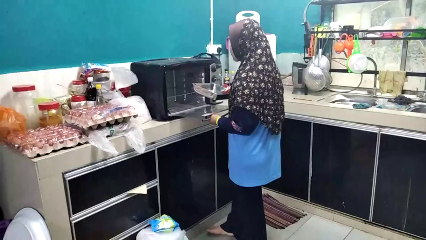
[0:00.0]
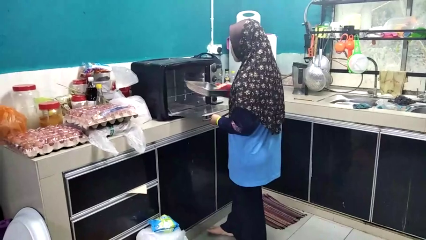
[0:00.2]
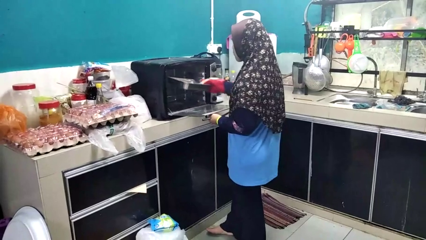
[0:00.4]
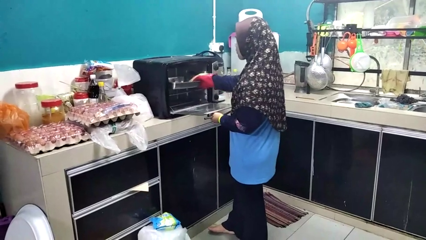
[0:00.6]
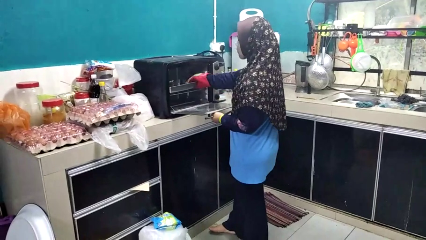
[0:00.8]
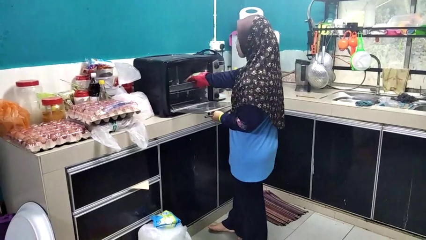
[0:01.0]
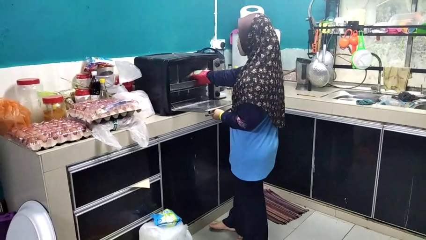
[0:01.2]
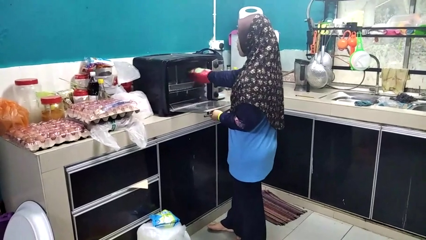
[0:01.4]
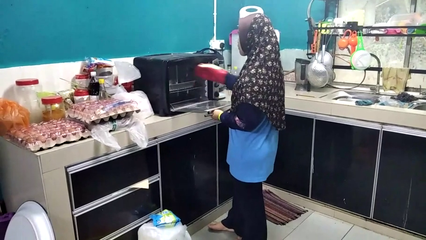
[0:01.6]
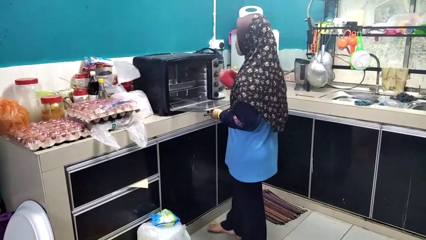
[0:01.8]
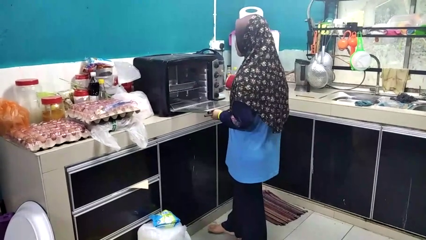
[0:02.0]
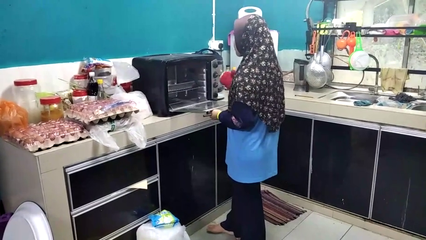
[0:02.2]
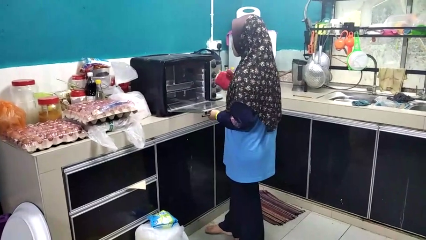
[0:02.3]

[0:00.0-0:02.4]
person puts object into oven

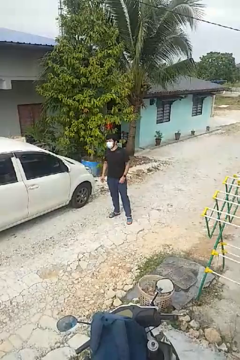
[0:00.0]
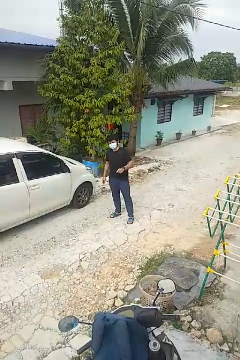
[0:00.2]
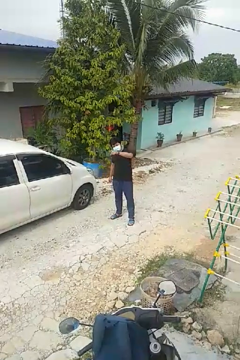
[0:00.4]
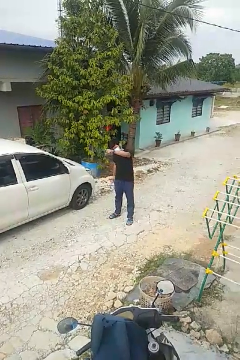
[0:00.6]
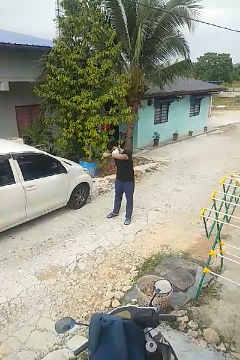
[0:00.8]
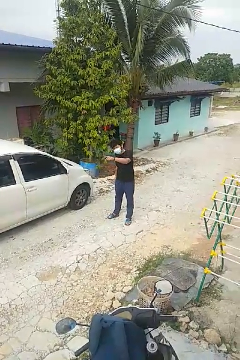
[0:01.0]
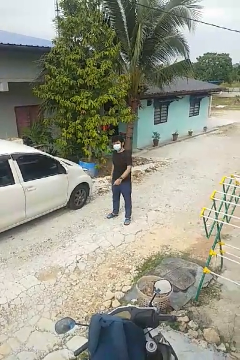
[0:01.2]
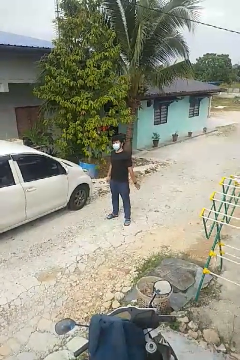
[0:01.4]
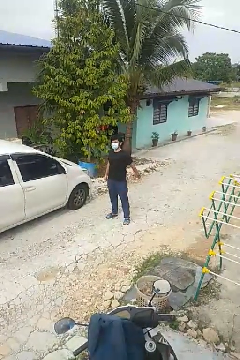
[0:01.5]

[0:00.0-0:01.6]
person points at person

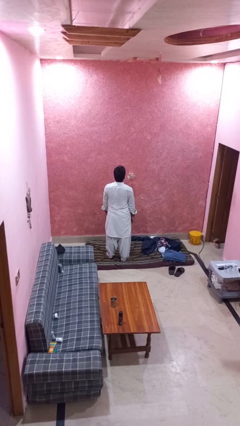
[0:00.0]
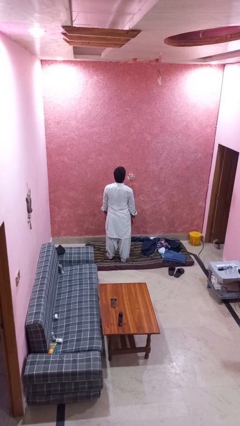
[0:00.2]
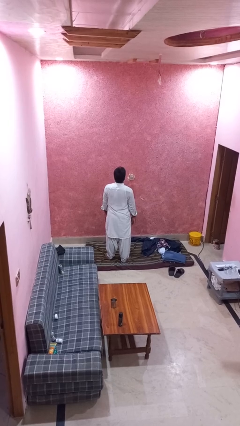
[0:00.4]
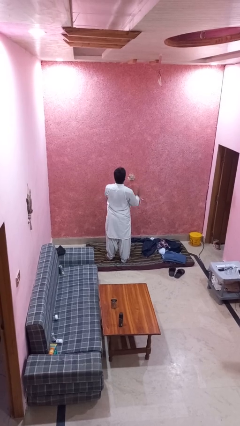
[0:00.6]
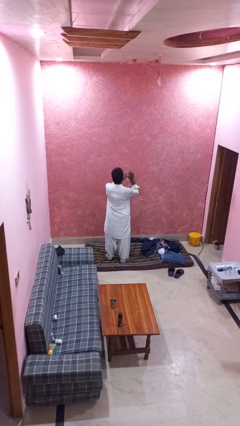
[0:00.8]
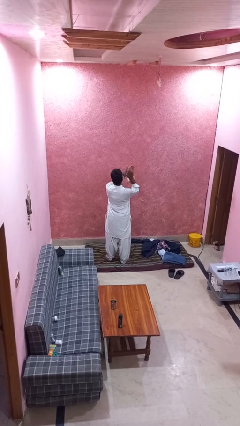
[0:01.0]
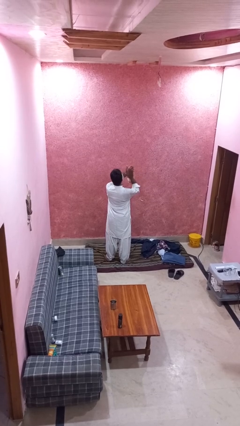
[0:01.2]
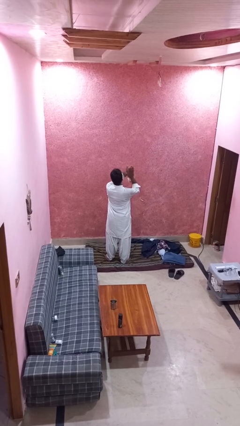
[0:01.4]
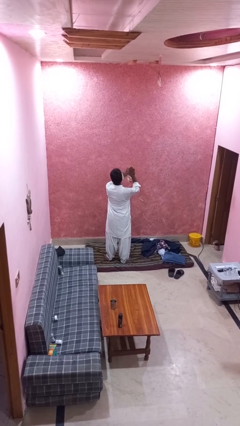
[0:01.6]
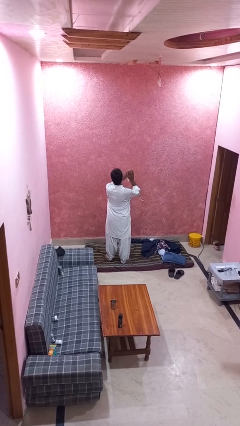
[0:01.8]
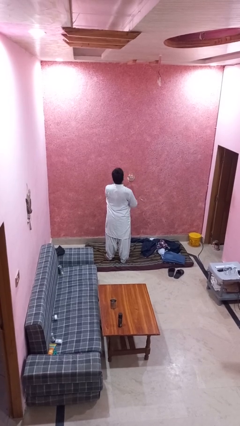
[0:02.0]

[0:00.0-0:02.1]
person claps hands

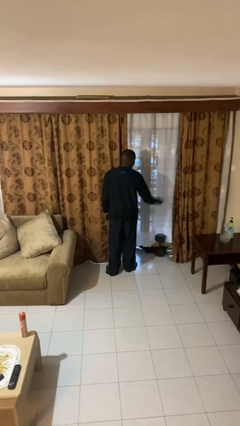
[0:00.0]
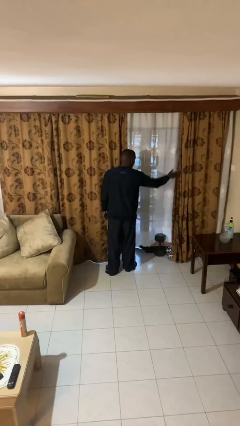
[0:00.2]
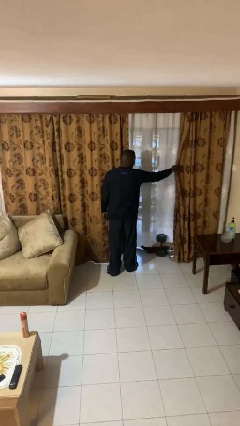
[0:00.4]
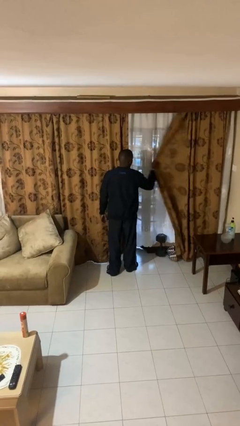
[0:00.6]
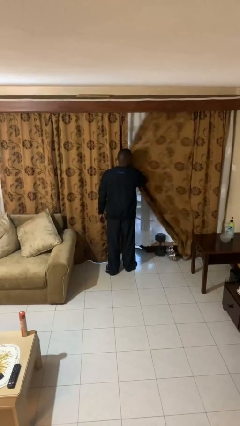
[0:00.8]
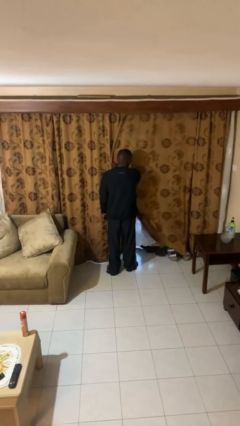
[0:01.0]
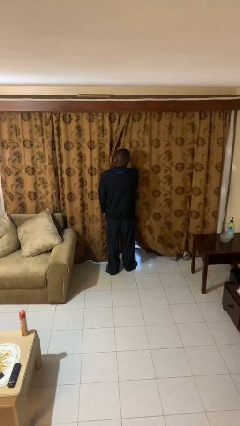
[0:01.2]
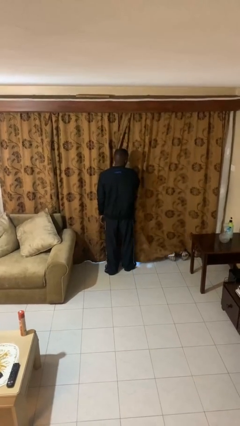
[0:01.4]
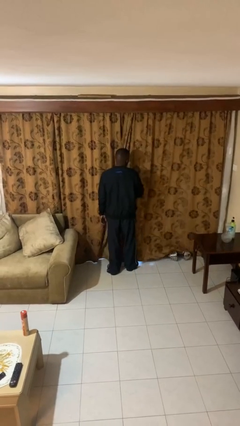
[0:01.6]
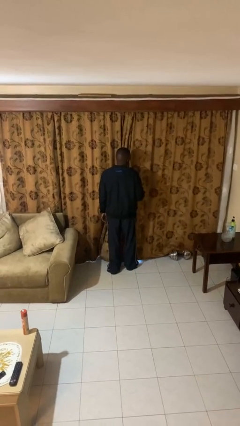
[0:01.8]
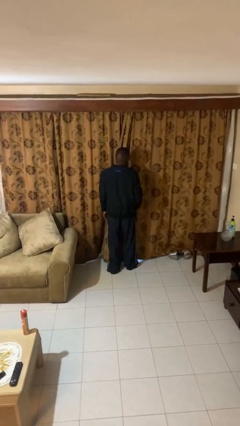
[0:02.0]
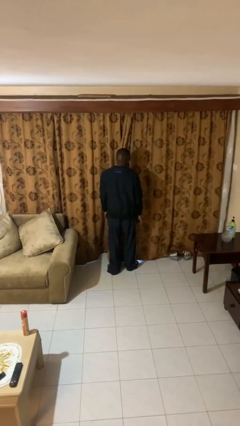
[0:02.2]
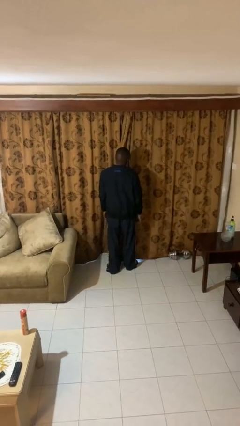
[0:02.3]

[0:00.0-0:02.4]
person closes curtains

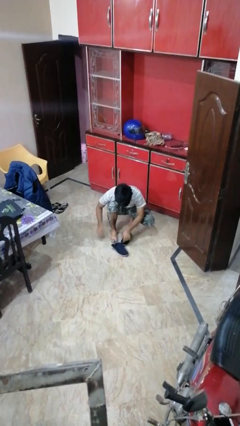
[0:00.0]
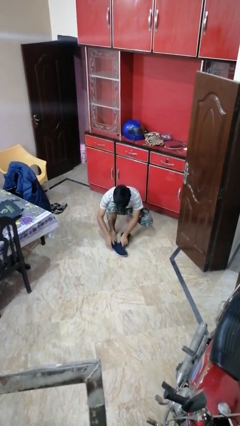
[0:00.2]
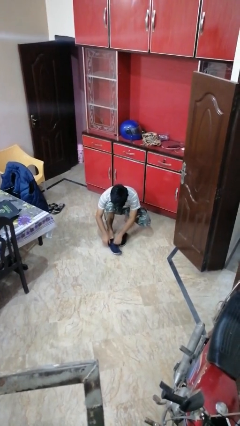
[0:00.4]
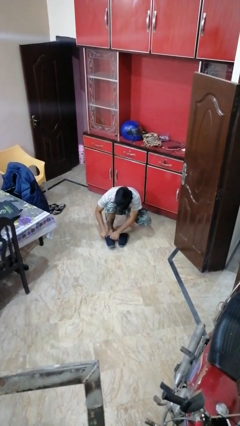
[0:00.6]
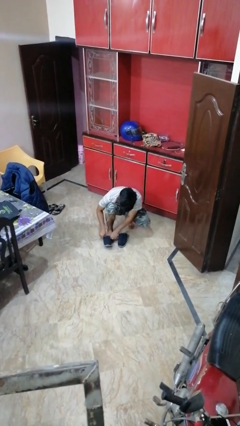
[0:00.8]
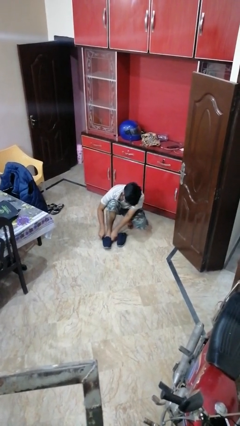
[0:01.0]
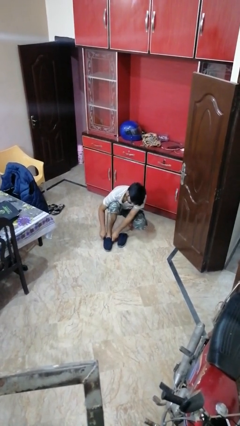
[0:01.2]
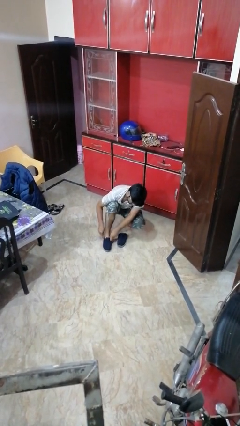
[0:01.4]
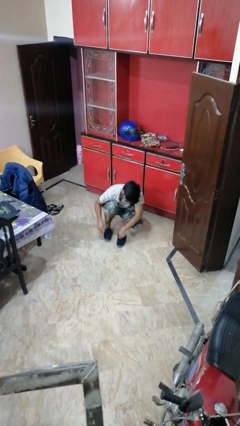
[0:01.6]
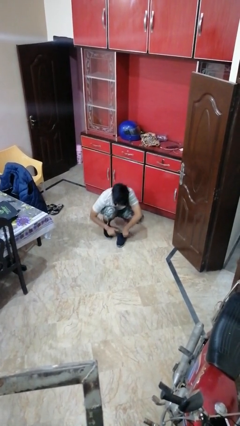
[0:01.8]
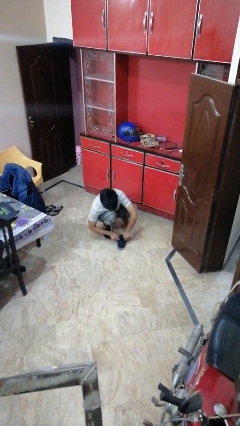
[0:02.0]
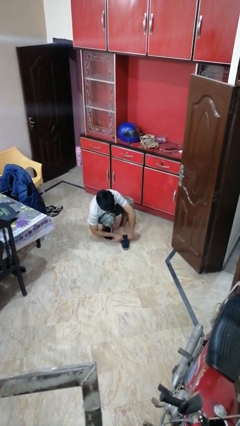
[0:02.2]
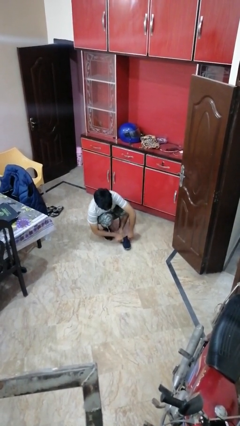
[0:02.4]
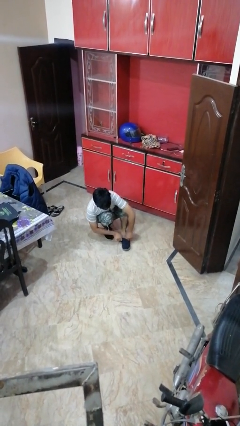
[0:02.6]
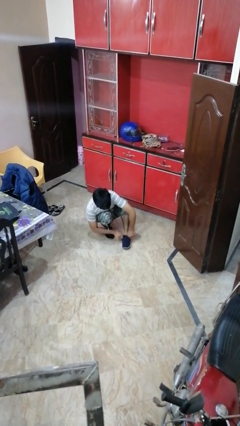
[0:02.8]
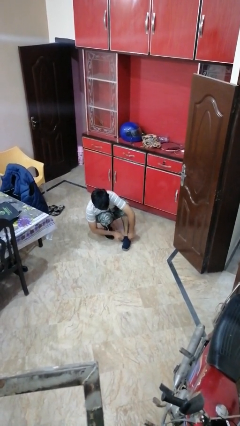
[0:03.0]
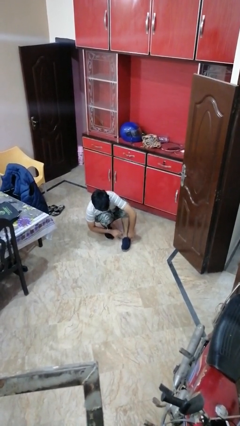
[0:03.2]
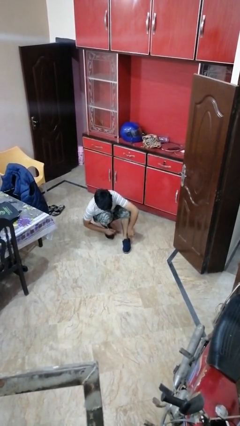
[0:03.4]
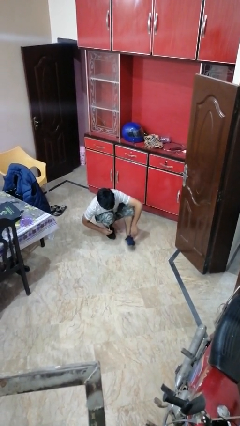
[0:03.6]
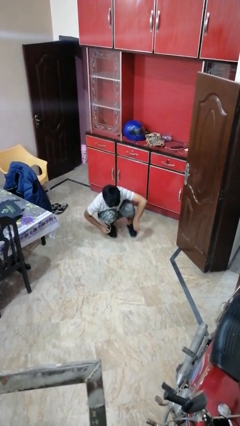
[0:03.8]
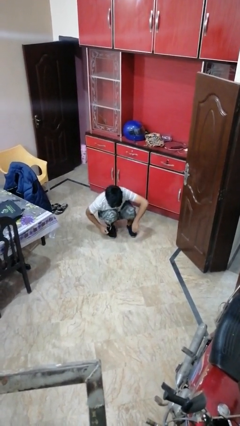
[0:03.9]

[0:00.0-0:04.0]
person puts on shoes

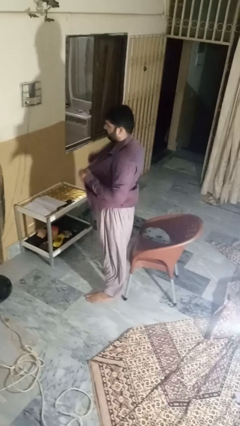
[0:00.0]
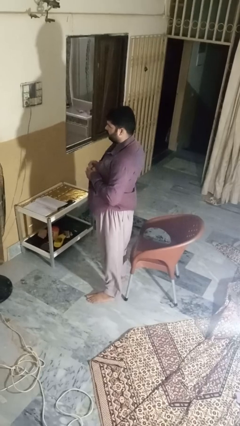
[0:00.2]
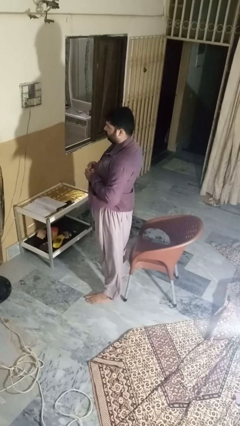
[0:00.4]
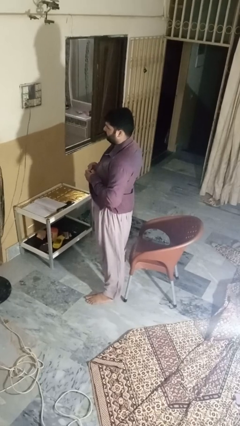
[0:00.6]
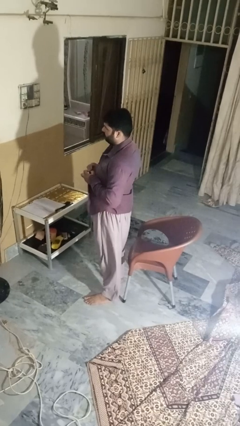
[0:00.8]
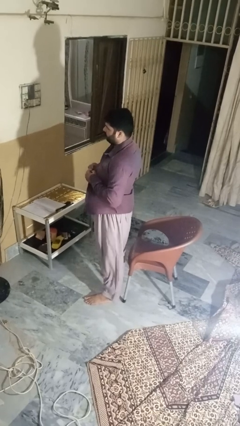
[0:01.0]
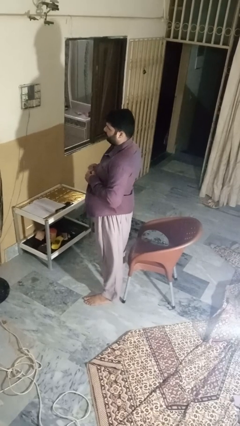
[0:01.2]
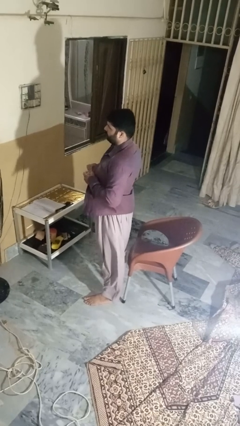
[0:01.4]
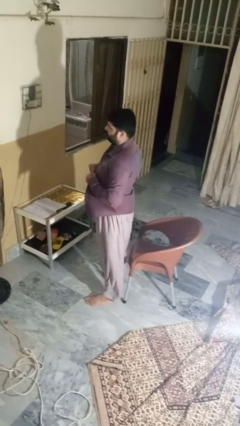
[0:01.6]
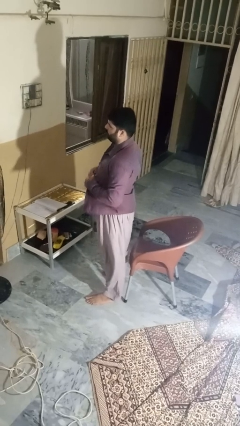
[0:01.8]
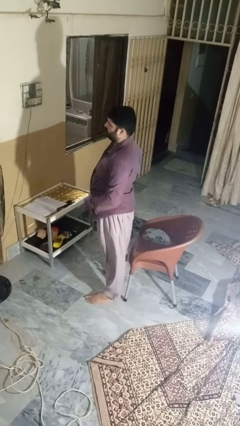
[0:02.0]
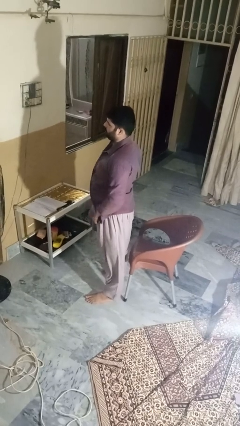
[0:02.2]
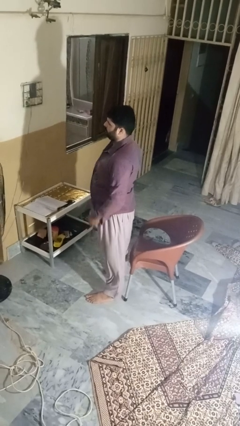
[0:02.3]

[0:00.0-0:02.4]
person buttons shirt

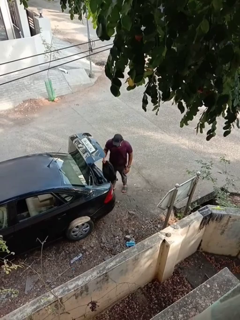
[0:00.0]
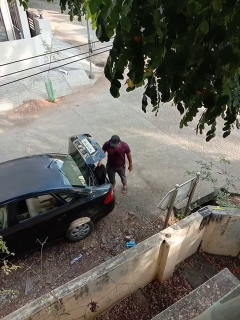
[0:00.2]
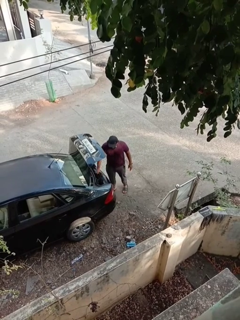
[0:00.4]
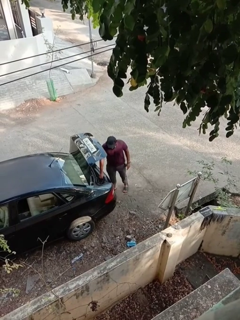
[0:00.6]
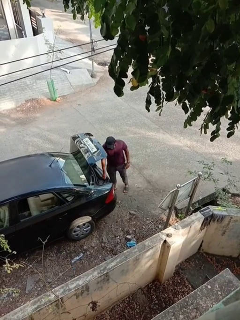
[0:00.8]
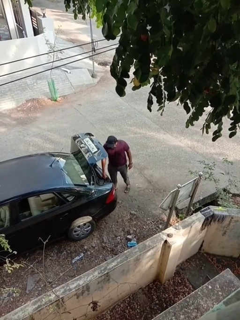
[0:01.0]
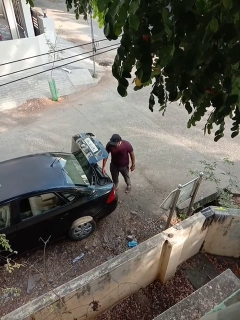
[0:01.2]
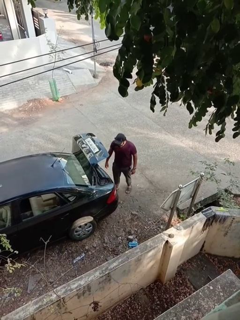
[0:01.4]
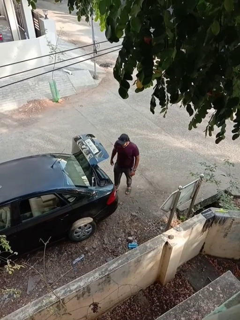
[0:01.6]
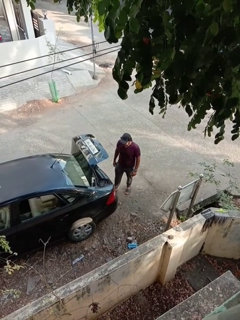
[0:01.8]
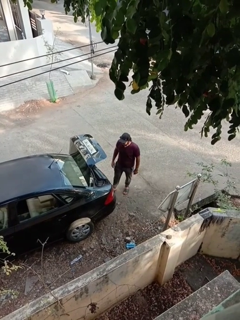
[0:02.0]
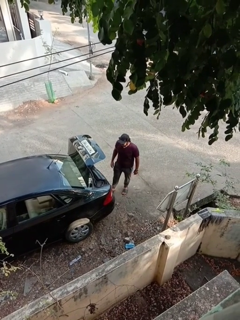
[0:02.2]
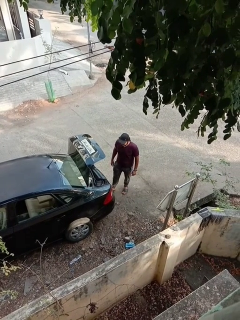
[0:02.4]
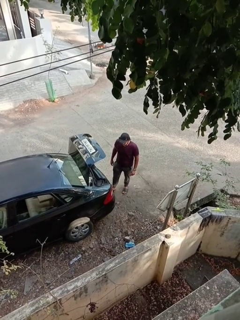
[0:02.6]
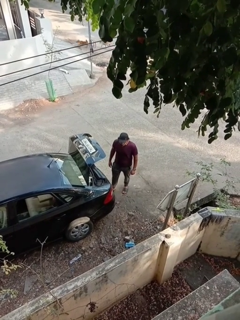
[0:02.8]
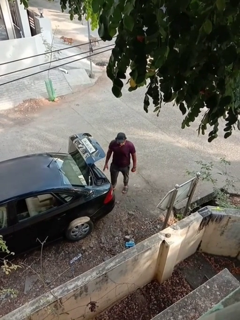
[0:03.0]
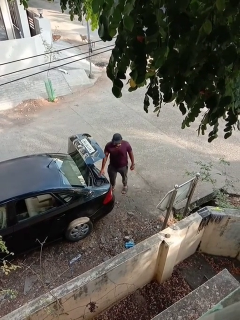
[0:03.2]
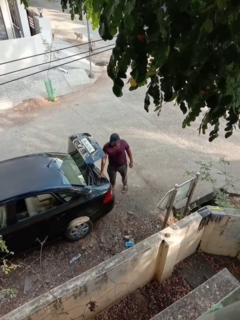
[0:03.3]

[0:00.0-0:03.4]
person loads car
